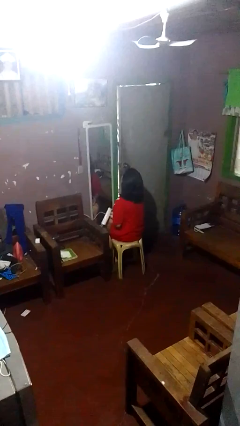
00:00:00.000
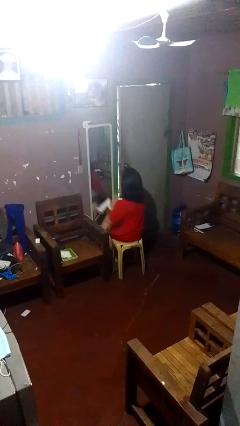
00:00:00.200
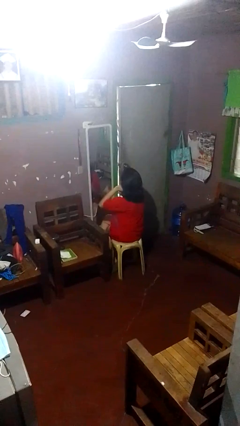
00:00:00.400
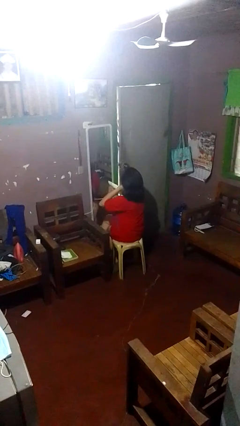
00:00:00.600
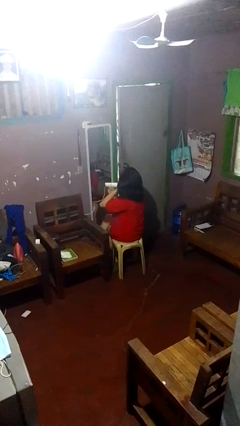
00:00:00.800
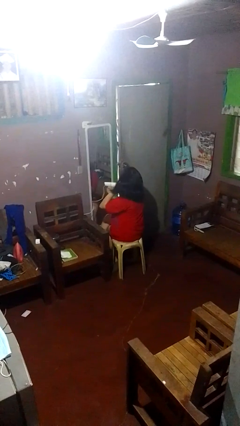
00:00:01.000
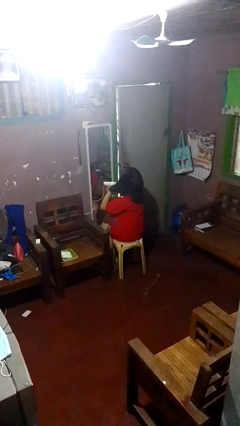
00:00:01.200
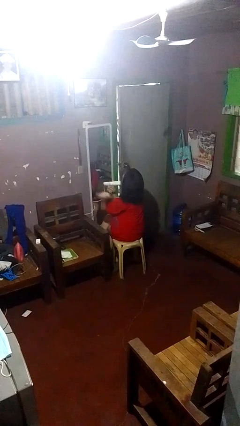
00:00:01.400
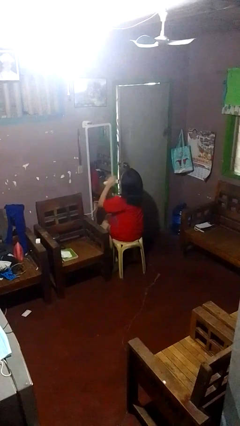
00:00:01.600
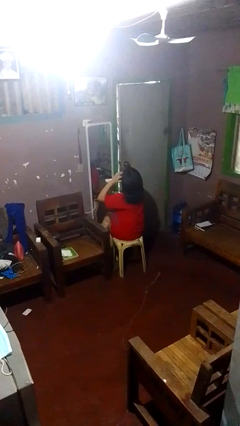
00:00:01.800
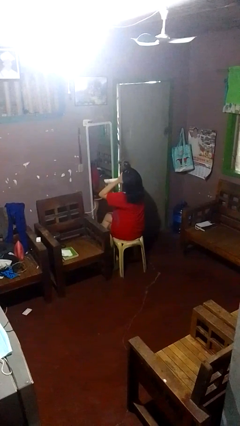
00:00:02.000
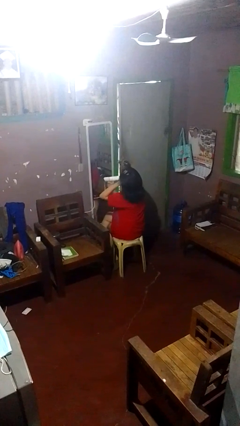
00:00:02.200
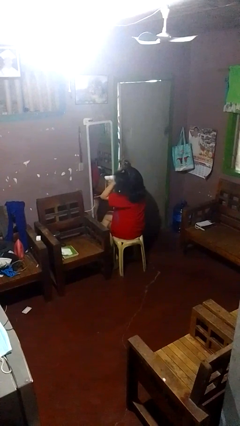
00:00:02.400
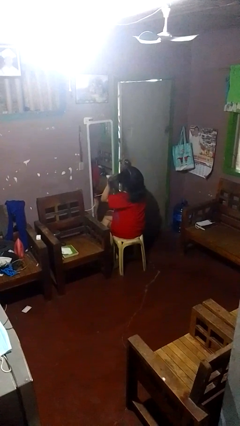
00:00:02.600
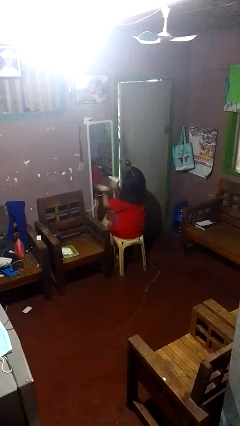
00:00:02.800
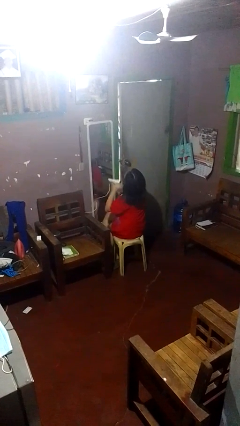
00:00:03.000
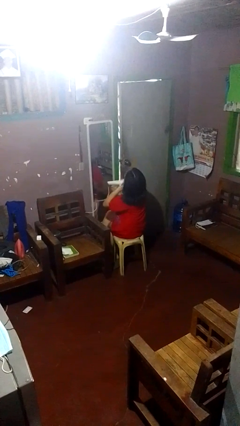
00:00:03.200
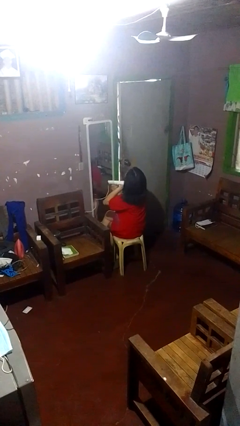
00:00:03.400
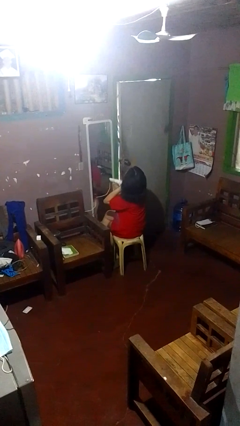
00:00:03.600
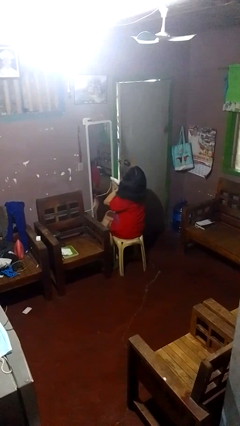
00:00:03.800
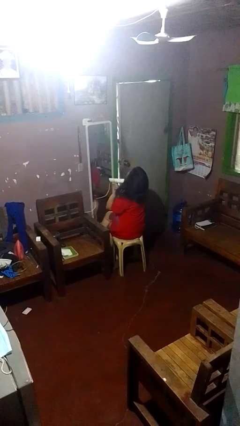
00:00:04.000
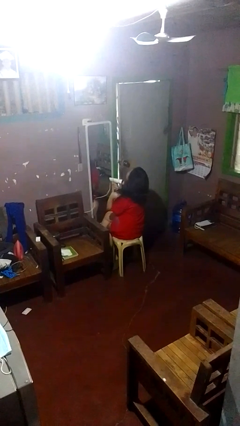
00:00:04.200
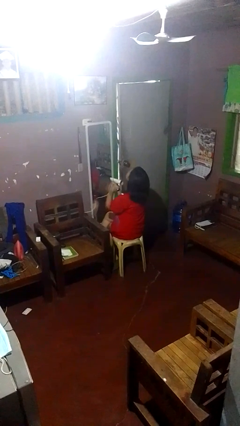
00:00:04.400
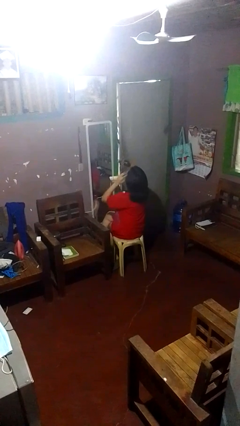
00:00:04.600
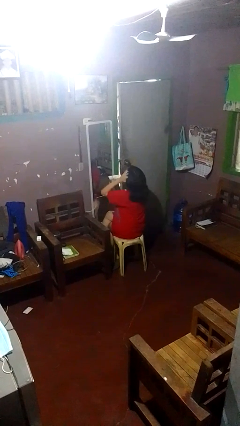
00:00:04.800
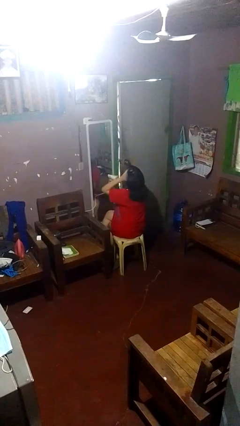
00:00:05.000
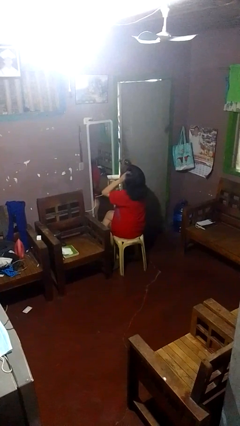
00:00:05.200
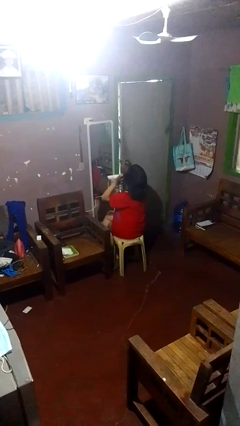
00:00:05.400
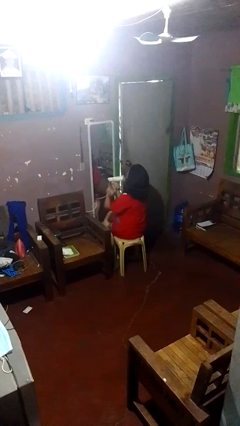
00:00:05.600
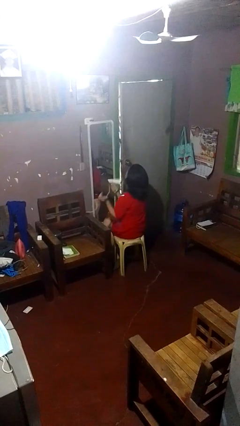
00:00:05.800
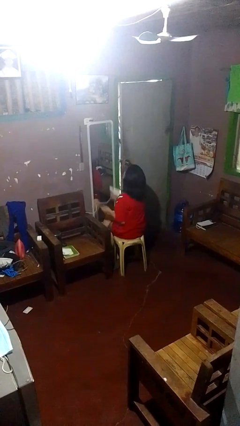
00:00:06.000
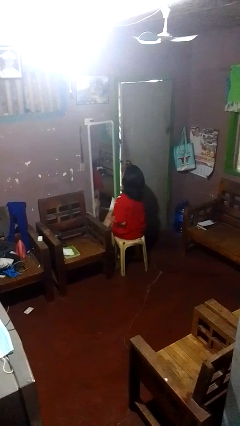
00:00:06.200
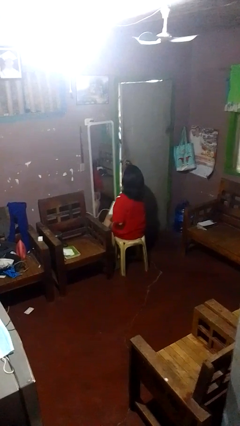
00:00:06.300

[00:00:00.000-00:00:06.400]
person dries hair with hairdryer

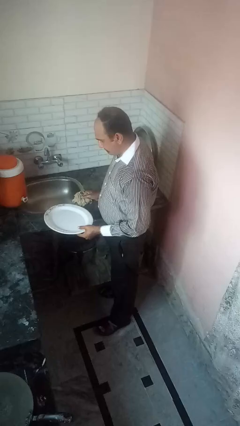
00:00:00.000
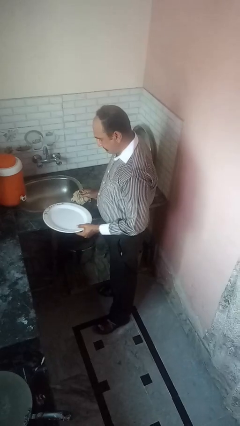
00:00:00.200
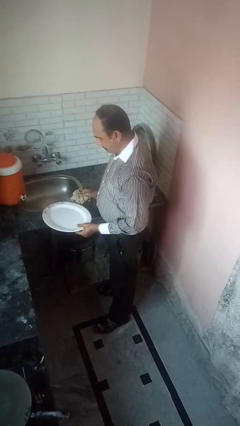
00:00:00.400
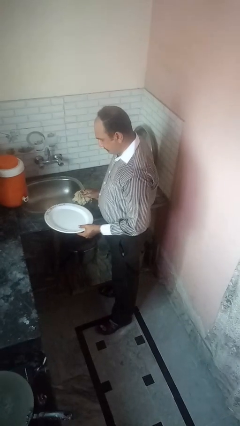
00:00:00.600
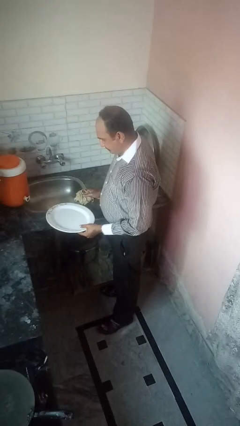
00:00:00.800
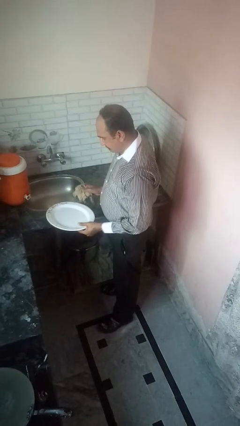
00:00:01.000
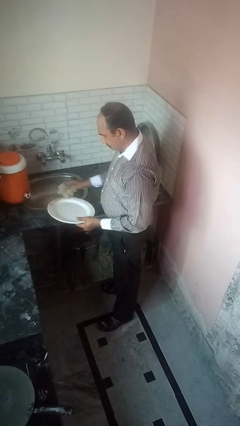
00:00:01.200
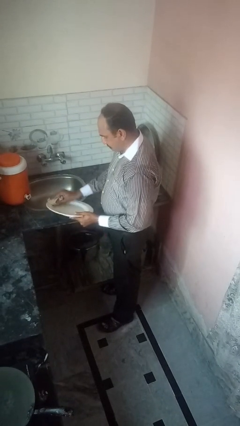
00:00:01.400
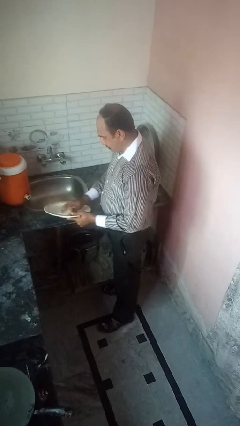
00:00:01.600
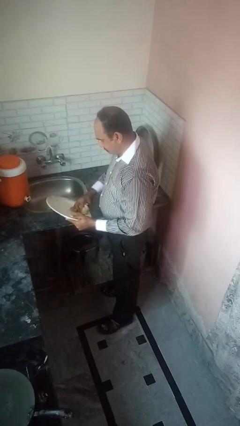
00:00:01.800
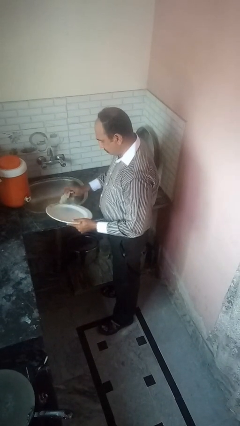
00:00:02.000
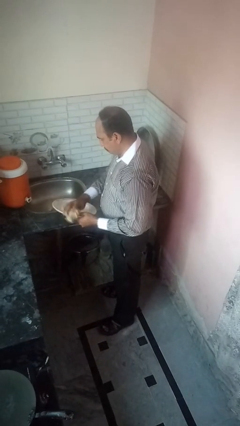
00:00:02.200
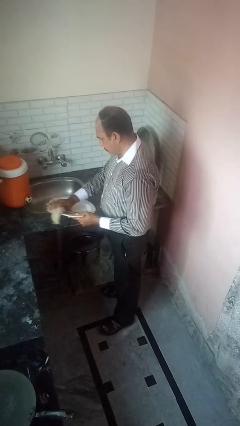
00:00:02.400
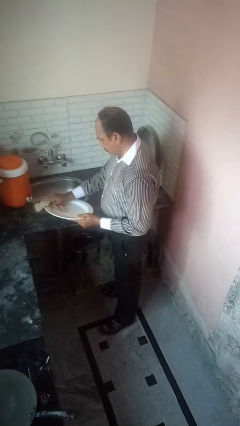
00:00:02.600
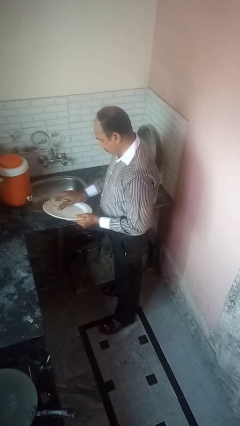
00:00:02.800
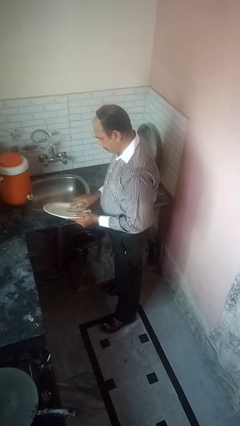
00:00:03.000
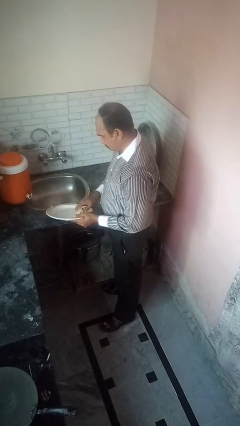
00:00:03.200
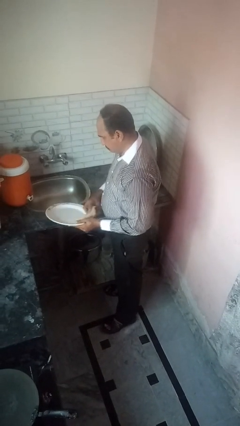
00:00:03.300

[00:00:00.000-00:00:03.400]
person dries dish

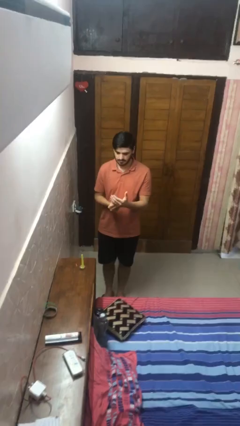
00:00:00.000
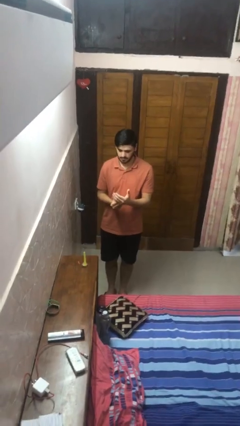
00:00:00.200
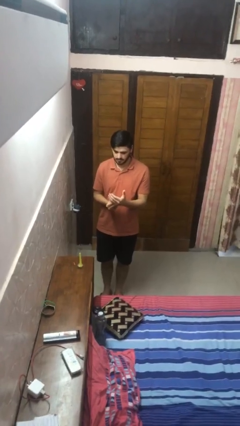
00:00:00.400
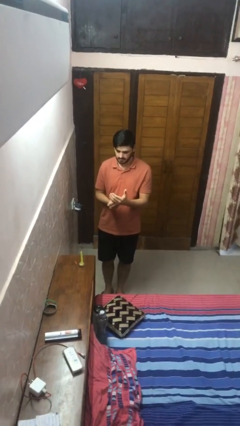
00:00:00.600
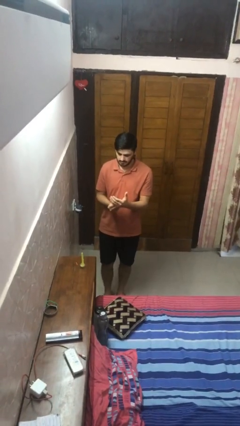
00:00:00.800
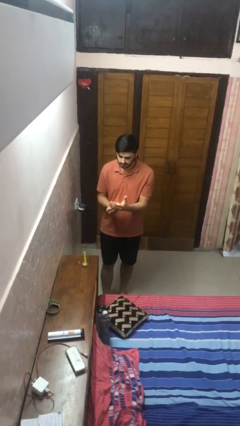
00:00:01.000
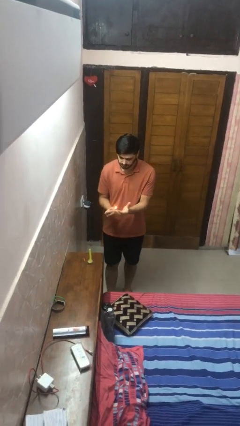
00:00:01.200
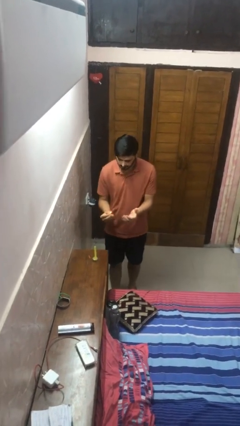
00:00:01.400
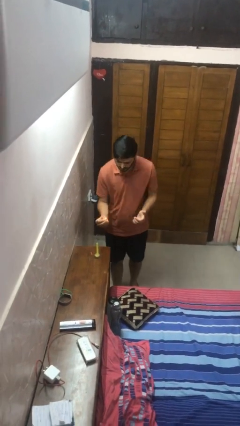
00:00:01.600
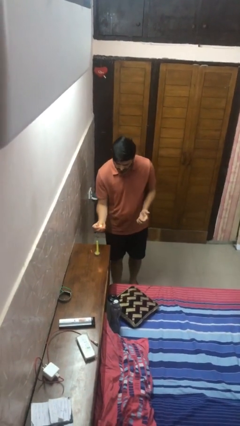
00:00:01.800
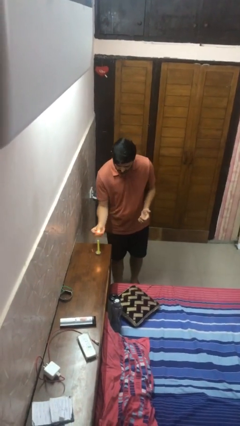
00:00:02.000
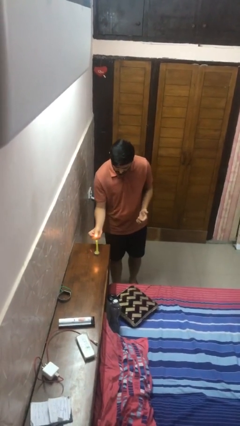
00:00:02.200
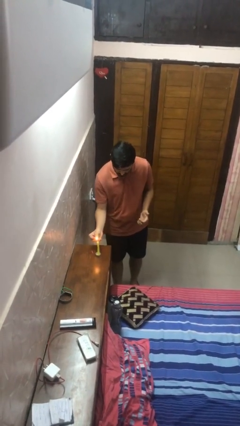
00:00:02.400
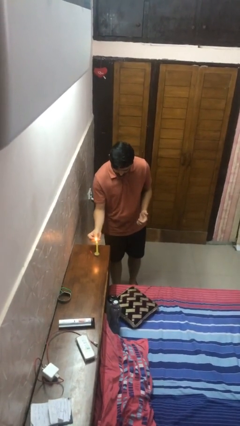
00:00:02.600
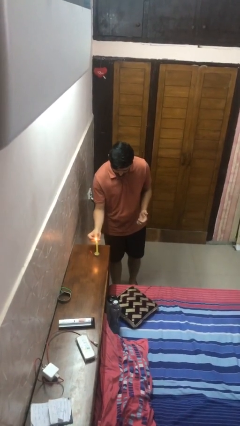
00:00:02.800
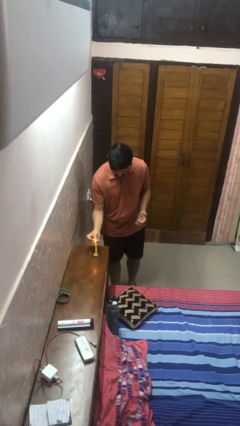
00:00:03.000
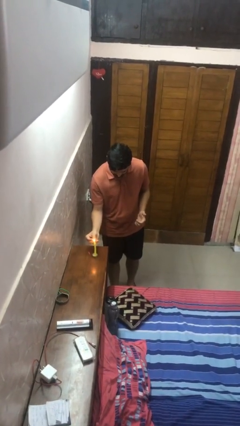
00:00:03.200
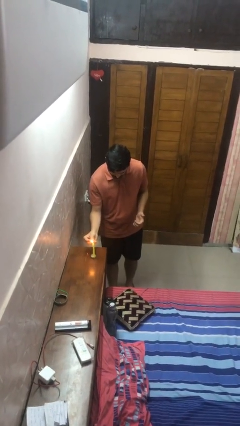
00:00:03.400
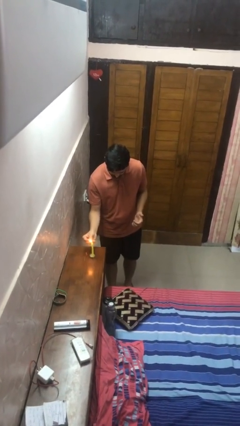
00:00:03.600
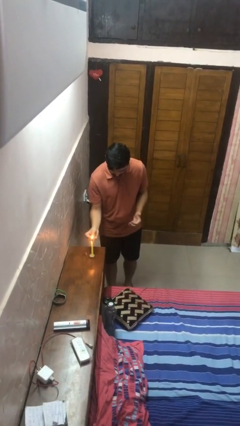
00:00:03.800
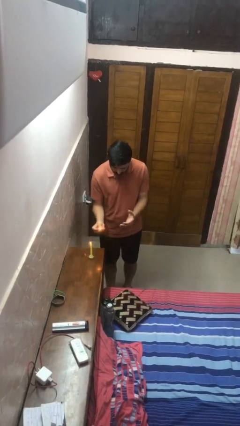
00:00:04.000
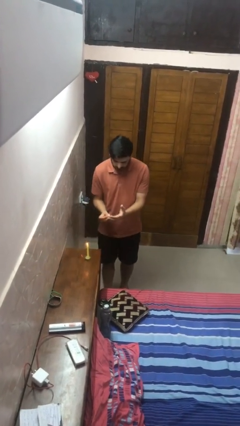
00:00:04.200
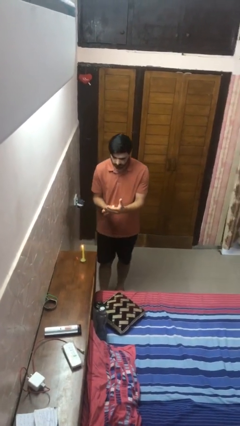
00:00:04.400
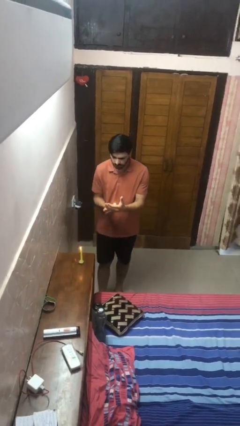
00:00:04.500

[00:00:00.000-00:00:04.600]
person lights candle

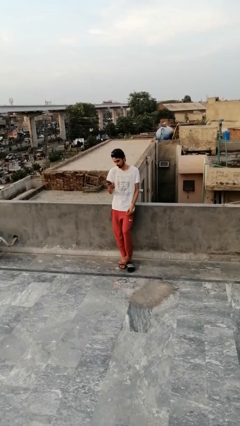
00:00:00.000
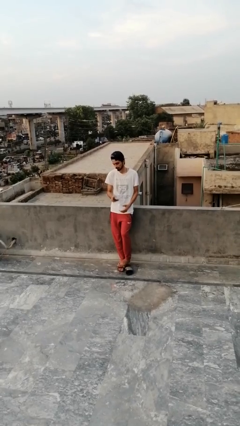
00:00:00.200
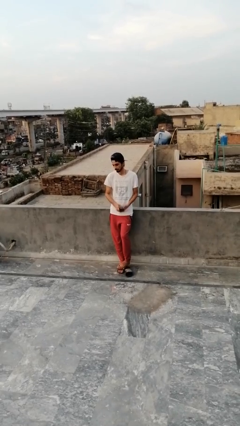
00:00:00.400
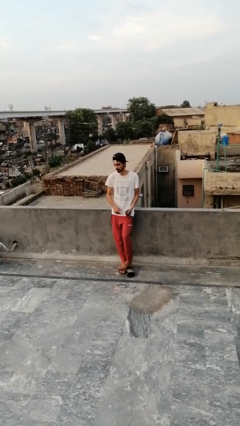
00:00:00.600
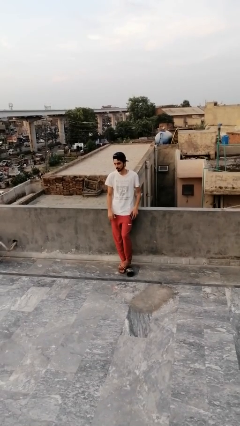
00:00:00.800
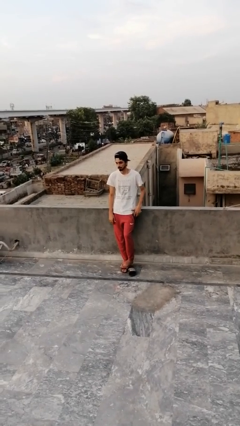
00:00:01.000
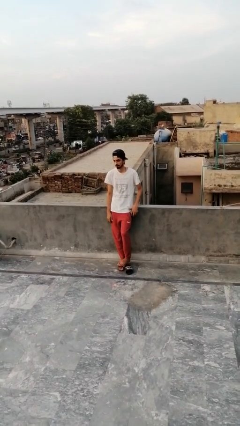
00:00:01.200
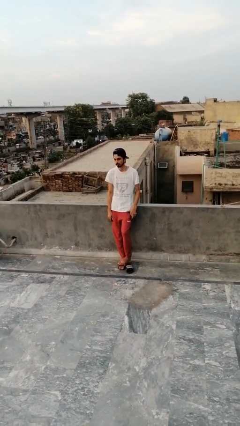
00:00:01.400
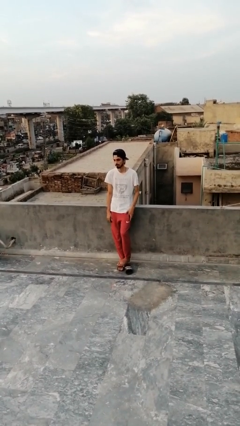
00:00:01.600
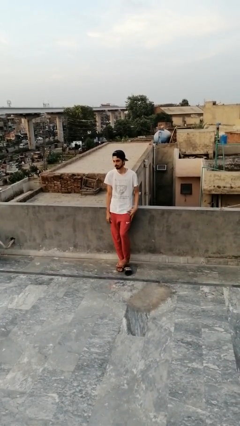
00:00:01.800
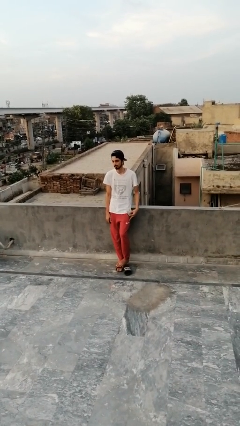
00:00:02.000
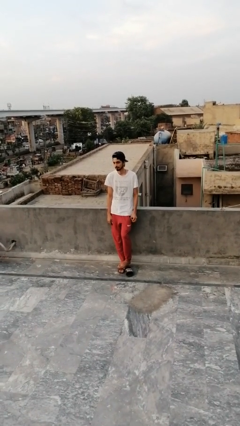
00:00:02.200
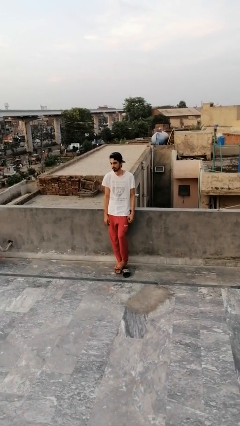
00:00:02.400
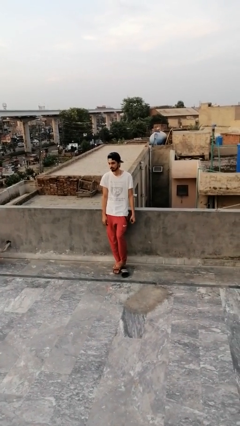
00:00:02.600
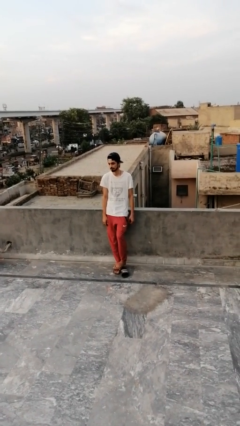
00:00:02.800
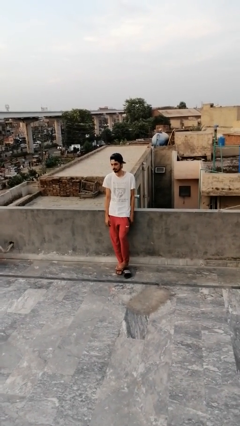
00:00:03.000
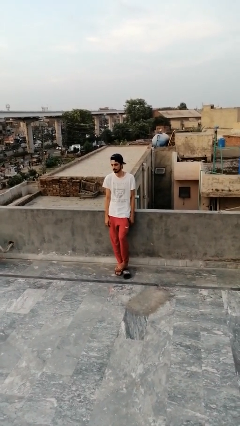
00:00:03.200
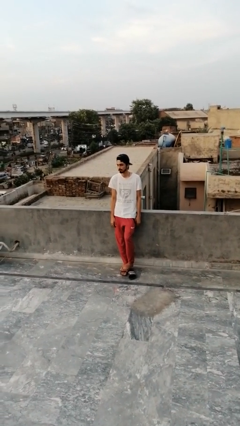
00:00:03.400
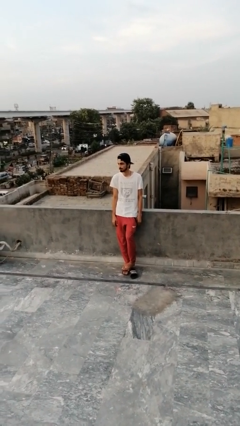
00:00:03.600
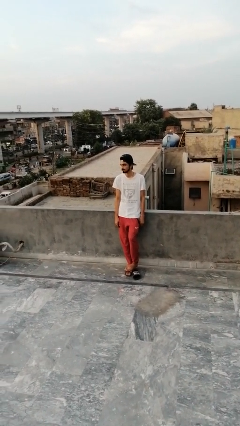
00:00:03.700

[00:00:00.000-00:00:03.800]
person puts phone into pocket
